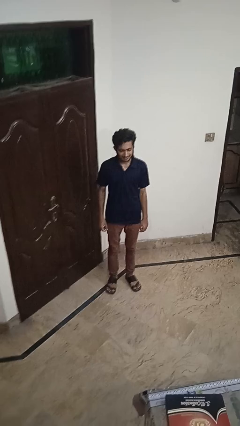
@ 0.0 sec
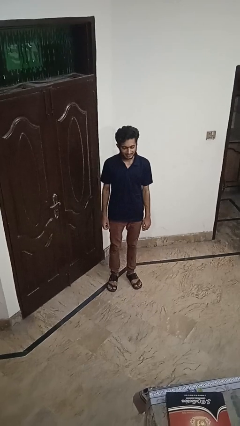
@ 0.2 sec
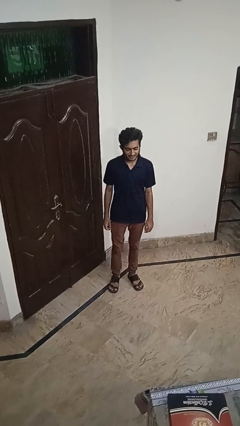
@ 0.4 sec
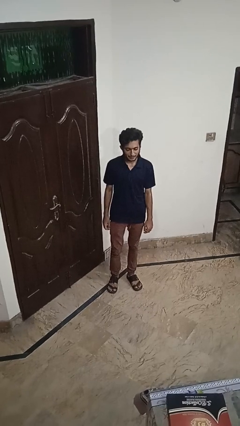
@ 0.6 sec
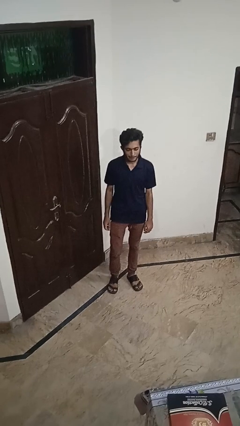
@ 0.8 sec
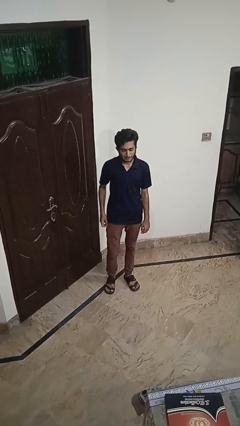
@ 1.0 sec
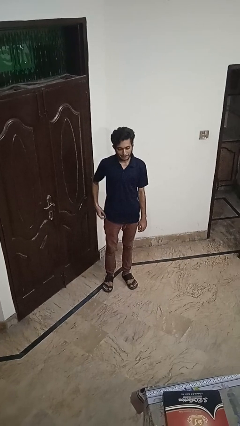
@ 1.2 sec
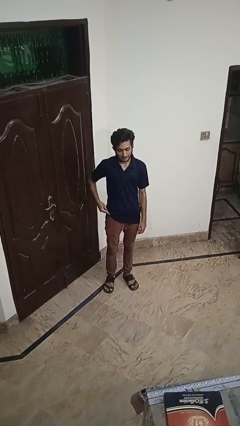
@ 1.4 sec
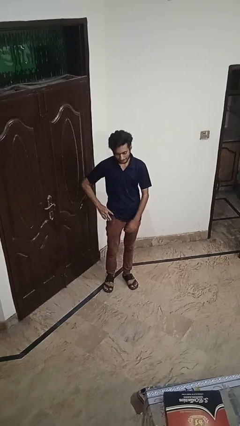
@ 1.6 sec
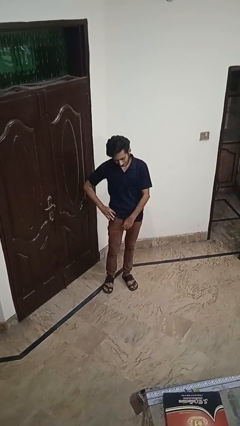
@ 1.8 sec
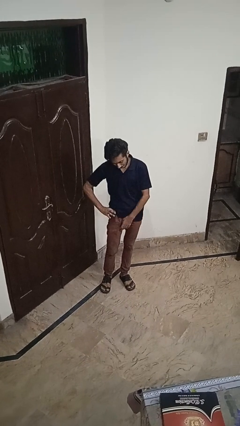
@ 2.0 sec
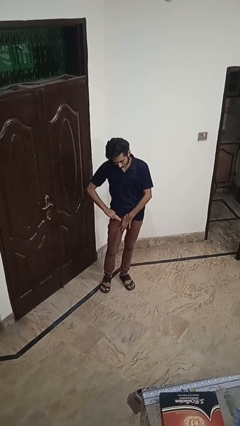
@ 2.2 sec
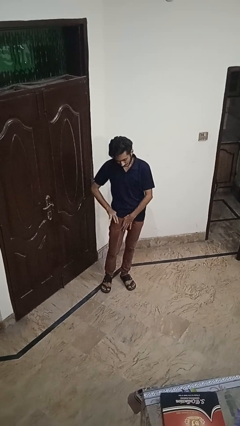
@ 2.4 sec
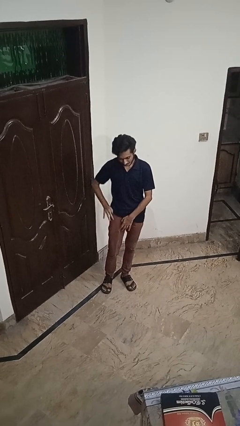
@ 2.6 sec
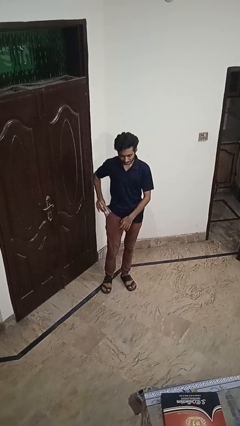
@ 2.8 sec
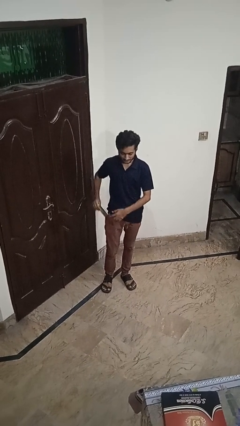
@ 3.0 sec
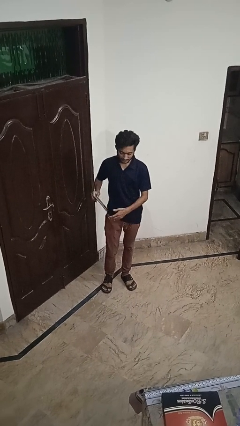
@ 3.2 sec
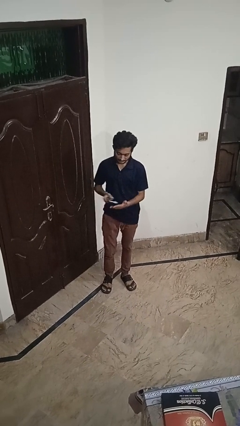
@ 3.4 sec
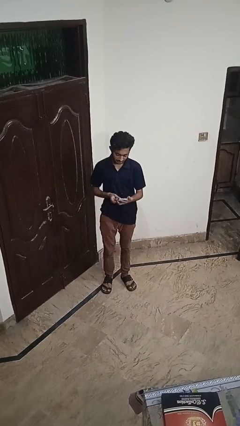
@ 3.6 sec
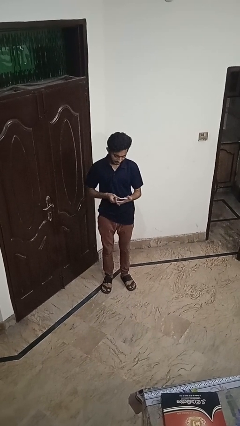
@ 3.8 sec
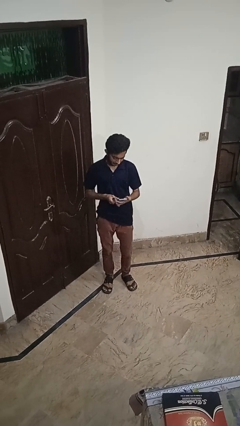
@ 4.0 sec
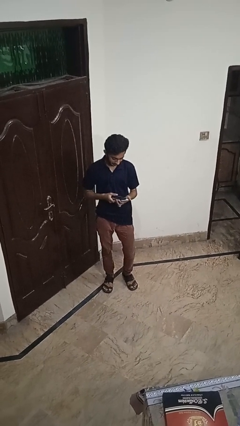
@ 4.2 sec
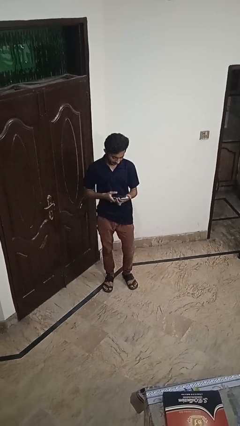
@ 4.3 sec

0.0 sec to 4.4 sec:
person takes phone from pocket

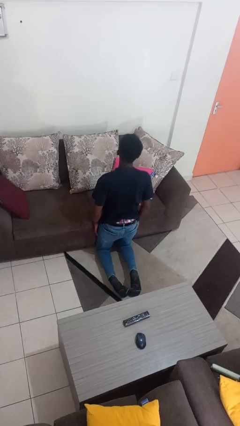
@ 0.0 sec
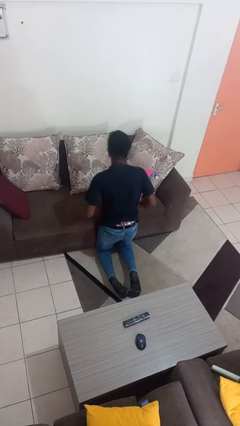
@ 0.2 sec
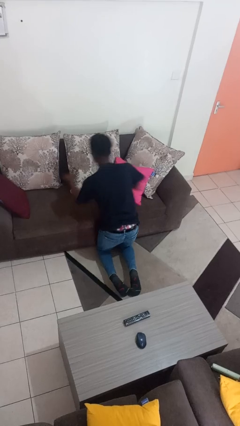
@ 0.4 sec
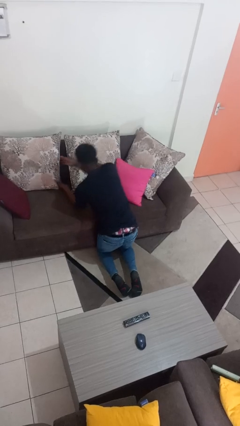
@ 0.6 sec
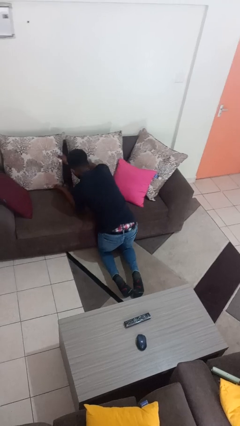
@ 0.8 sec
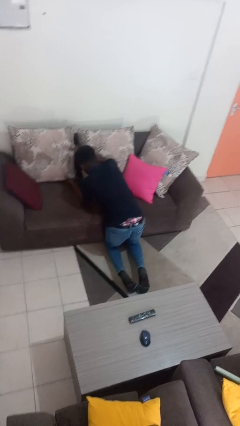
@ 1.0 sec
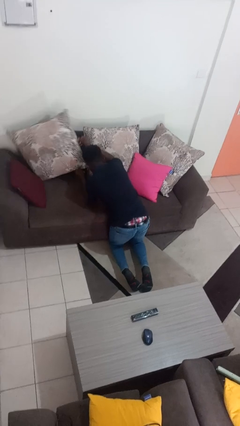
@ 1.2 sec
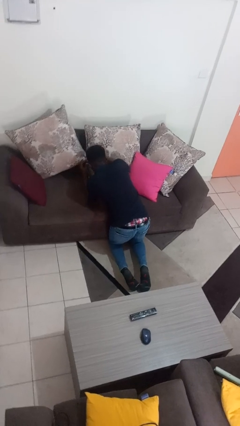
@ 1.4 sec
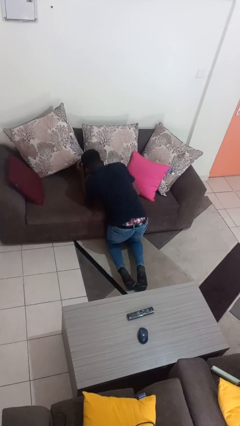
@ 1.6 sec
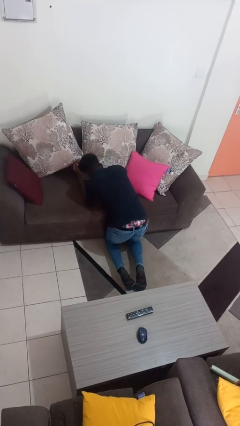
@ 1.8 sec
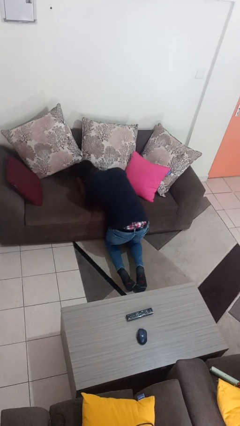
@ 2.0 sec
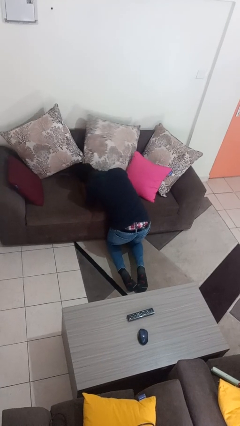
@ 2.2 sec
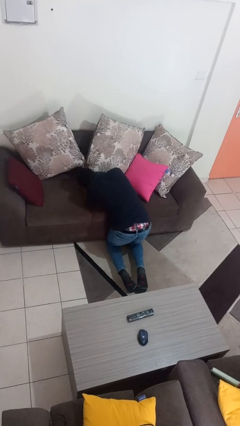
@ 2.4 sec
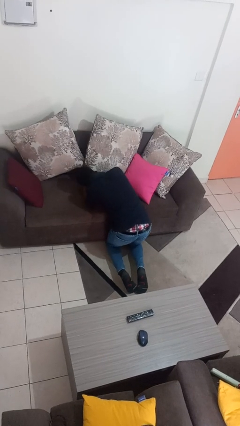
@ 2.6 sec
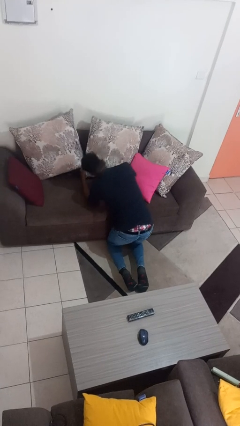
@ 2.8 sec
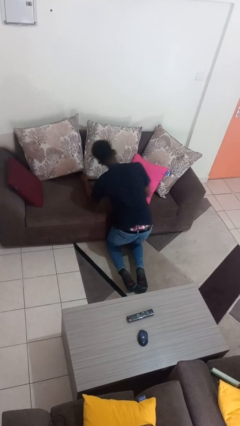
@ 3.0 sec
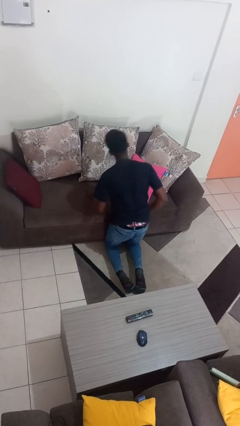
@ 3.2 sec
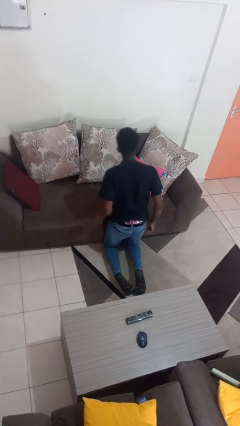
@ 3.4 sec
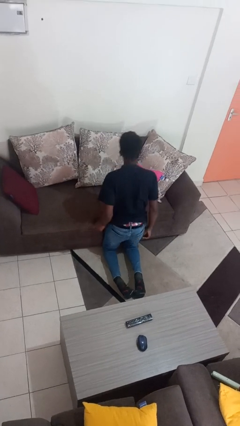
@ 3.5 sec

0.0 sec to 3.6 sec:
person searches in couch

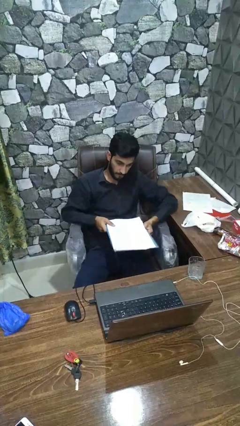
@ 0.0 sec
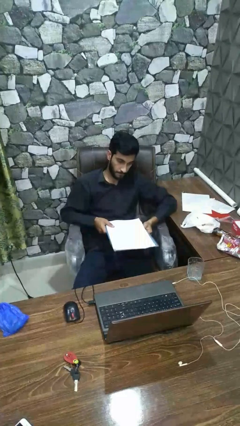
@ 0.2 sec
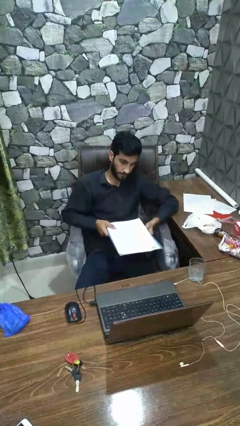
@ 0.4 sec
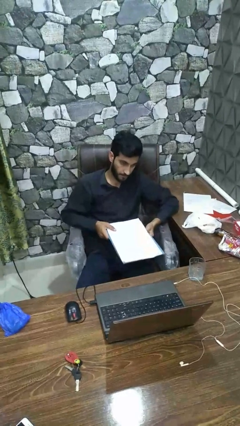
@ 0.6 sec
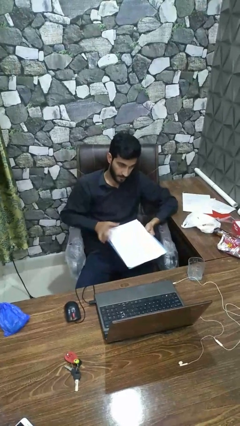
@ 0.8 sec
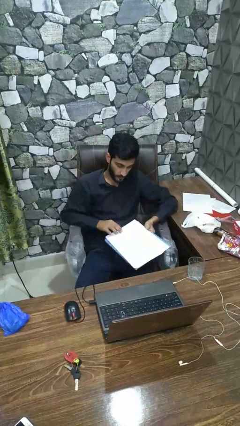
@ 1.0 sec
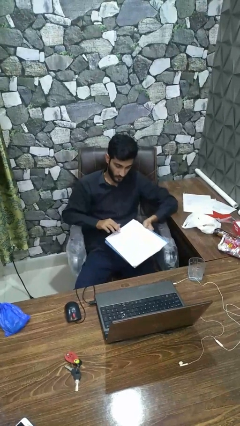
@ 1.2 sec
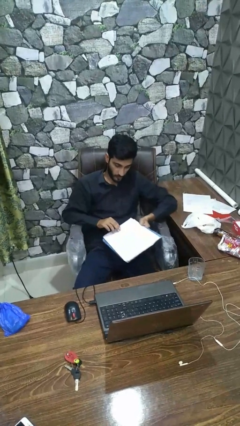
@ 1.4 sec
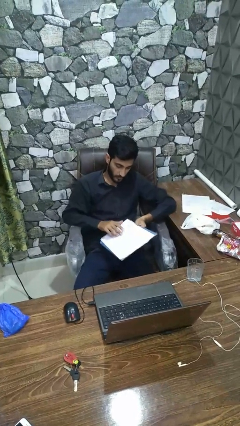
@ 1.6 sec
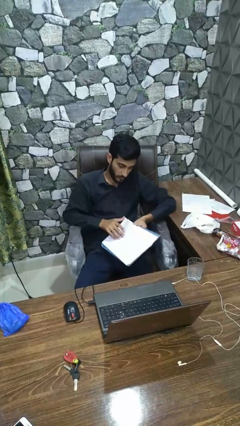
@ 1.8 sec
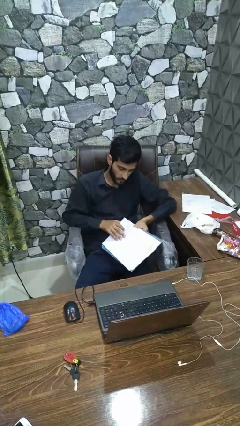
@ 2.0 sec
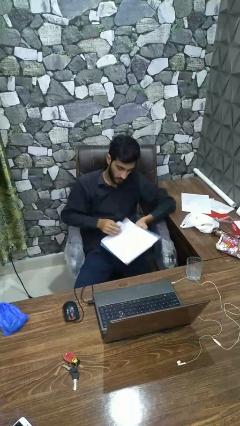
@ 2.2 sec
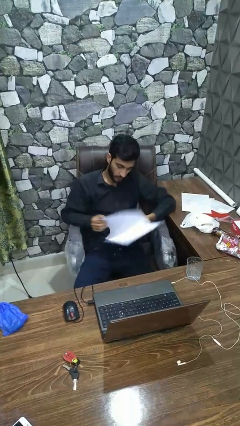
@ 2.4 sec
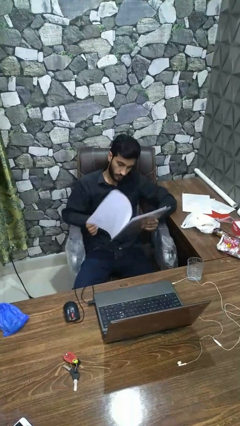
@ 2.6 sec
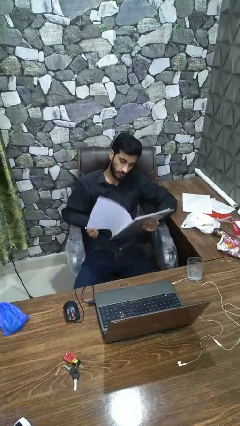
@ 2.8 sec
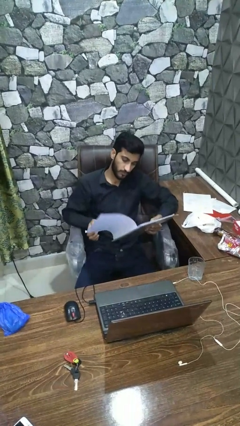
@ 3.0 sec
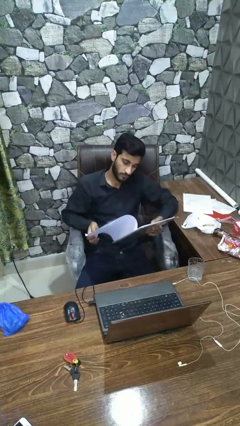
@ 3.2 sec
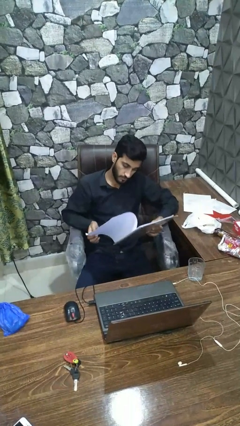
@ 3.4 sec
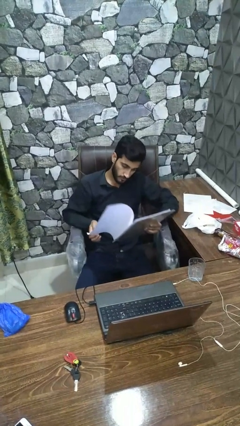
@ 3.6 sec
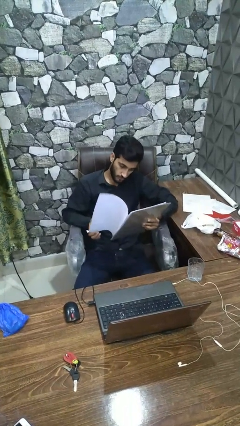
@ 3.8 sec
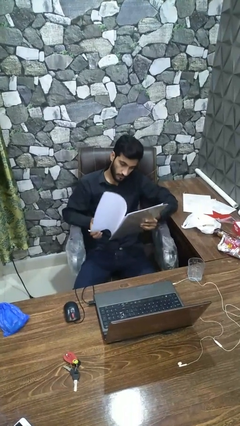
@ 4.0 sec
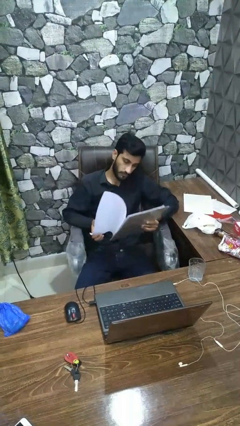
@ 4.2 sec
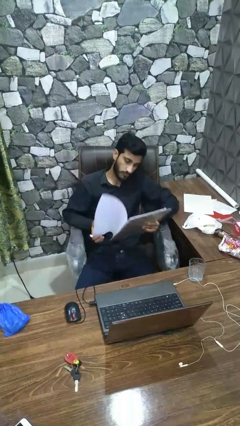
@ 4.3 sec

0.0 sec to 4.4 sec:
person reads book

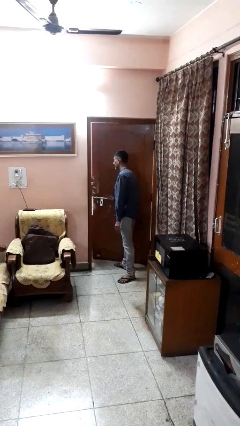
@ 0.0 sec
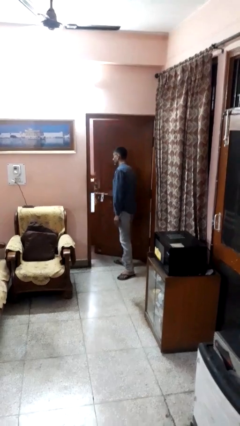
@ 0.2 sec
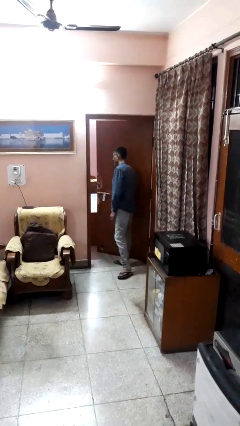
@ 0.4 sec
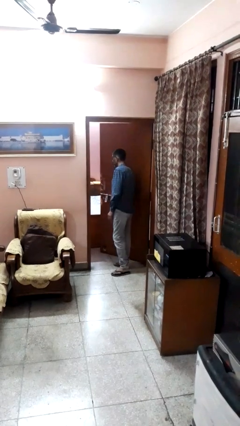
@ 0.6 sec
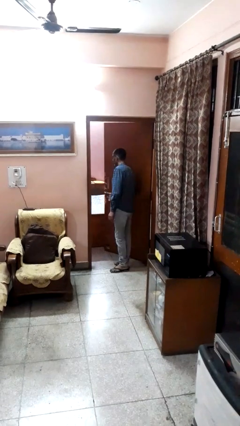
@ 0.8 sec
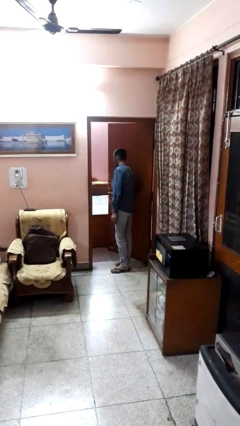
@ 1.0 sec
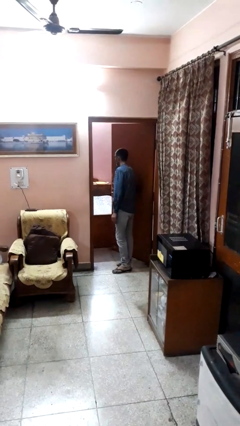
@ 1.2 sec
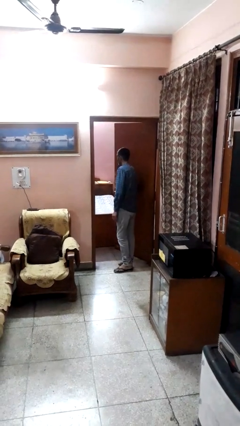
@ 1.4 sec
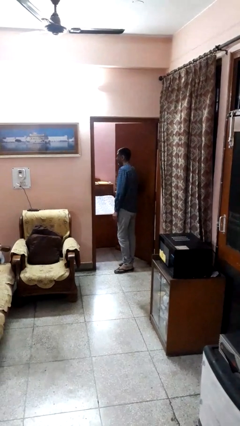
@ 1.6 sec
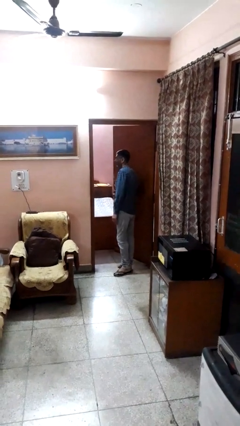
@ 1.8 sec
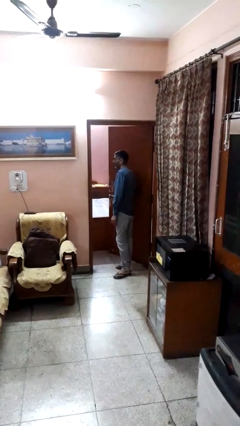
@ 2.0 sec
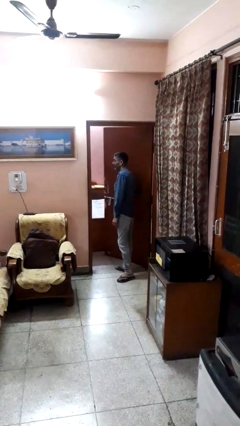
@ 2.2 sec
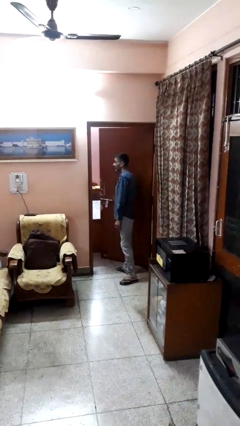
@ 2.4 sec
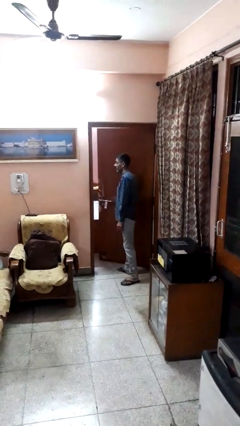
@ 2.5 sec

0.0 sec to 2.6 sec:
person opens facility door

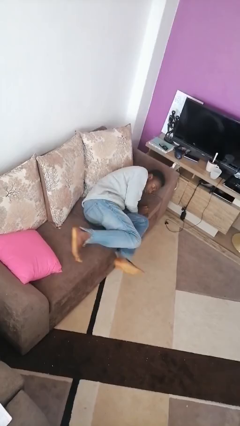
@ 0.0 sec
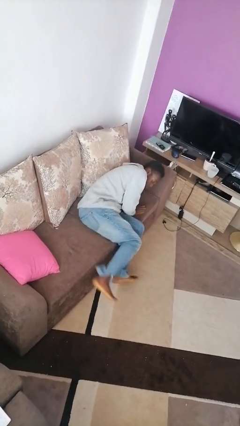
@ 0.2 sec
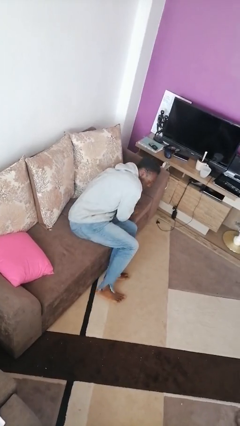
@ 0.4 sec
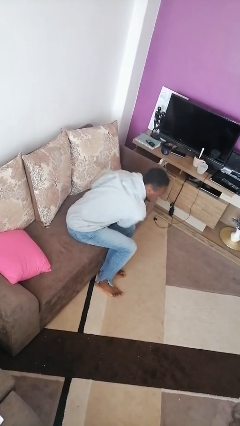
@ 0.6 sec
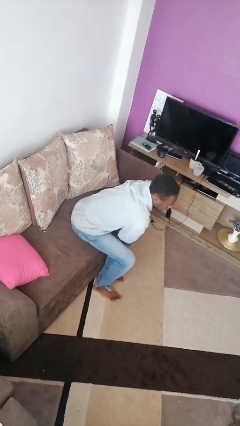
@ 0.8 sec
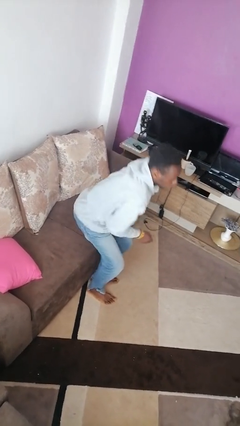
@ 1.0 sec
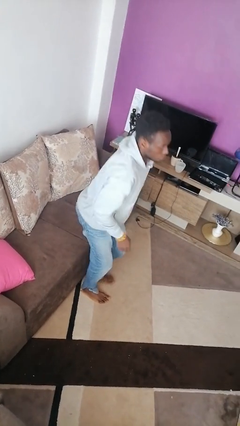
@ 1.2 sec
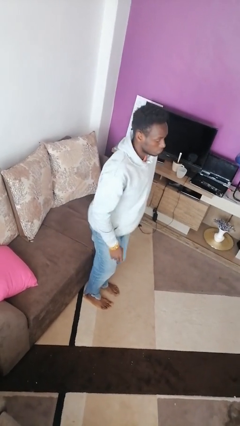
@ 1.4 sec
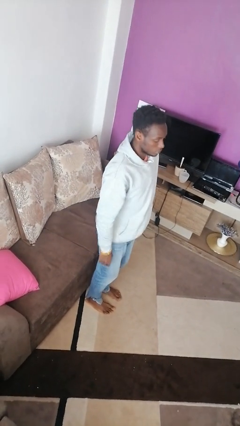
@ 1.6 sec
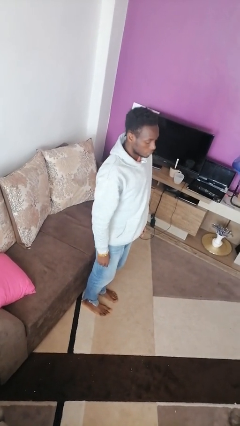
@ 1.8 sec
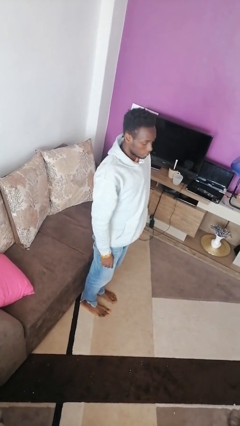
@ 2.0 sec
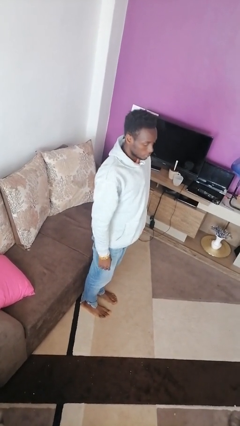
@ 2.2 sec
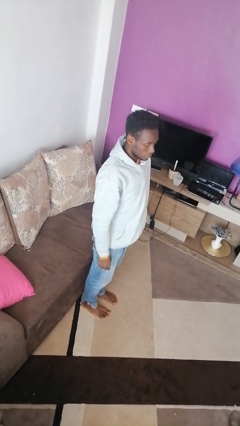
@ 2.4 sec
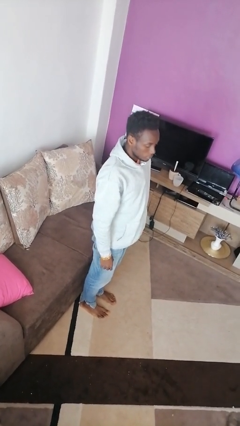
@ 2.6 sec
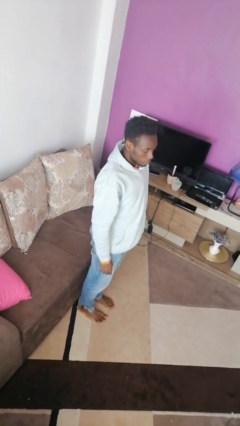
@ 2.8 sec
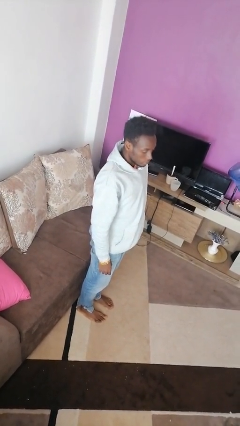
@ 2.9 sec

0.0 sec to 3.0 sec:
person stands up
